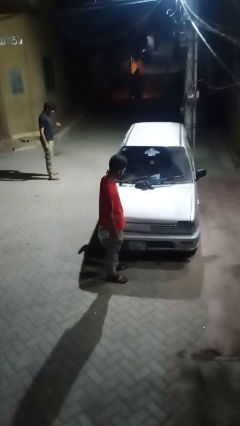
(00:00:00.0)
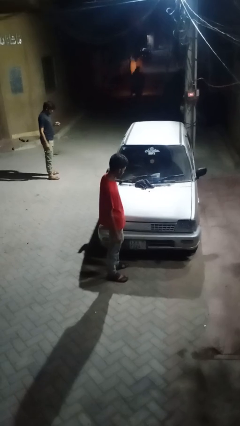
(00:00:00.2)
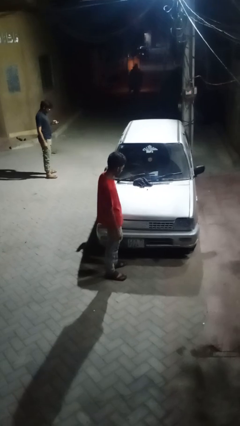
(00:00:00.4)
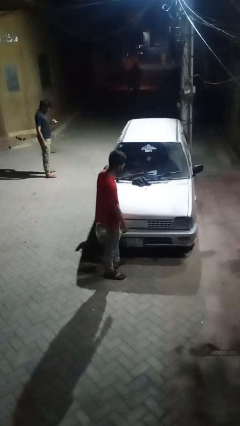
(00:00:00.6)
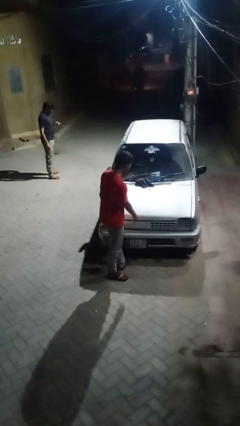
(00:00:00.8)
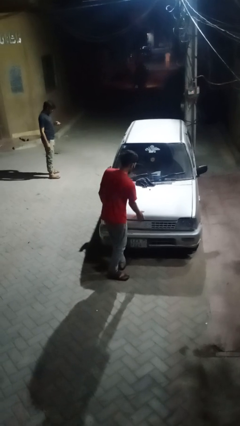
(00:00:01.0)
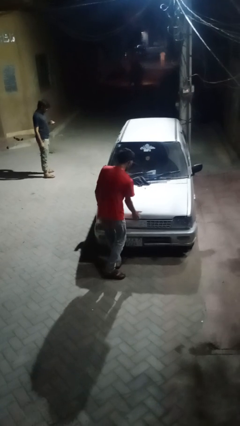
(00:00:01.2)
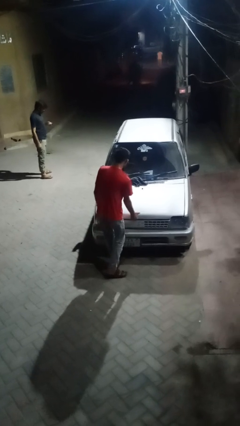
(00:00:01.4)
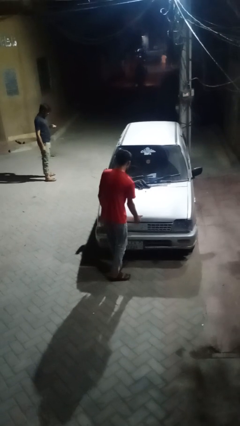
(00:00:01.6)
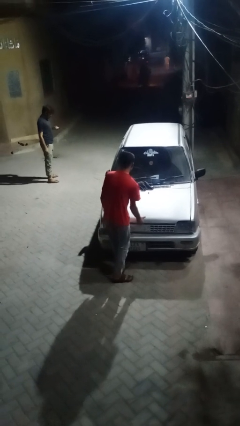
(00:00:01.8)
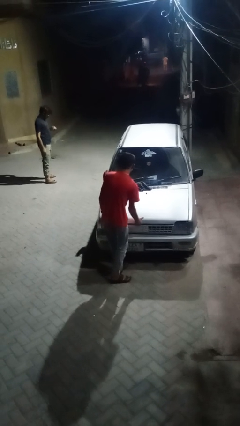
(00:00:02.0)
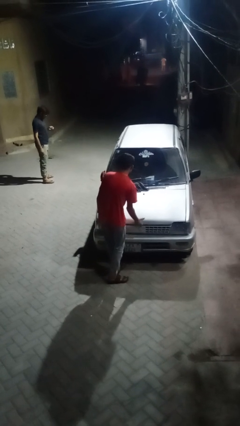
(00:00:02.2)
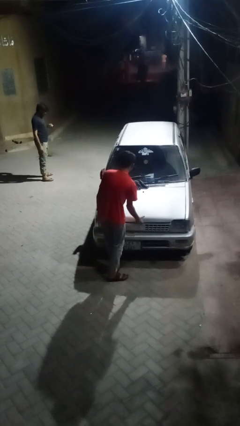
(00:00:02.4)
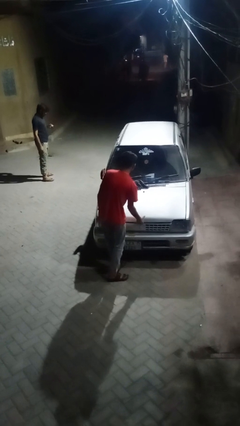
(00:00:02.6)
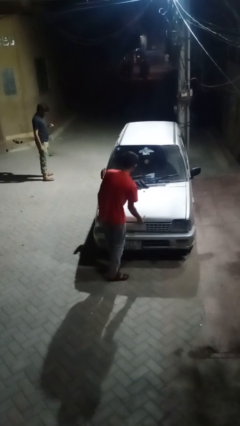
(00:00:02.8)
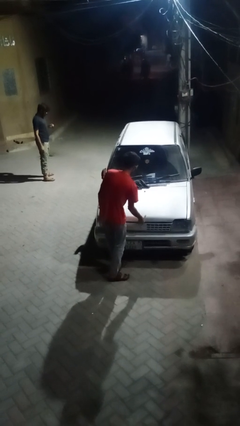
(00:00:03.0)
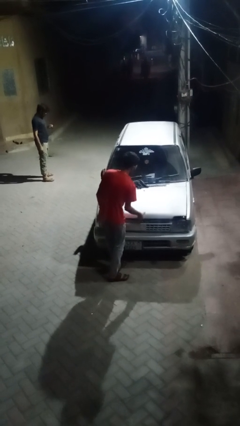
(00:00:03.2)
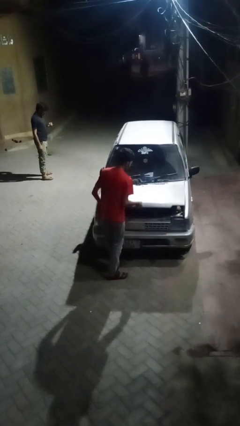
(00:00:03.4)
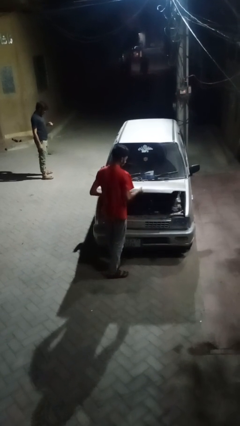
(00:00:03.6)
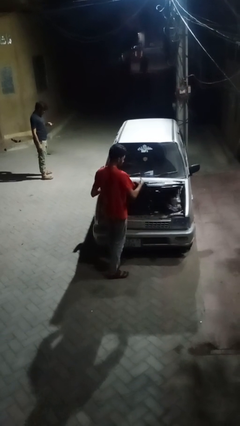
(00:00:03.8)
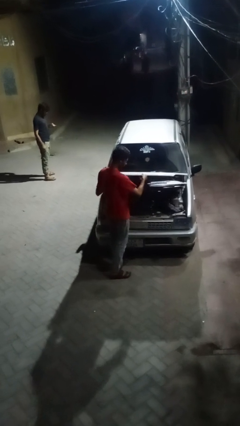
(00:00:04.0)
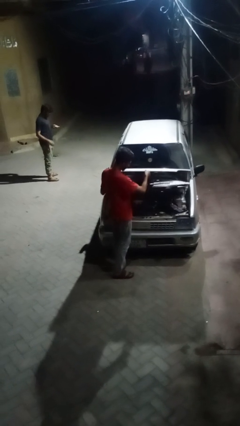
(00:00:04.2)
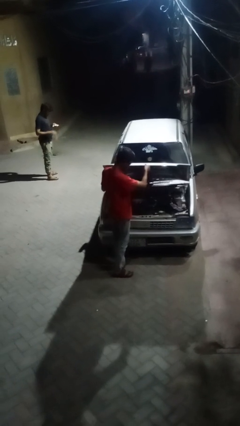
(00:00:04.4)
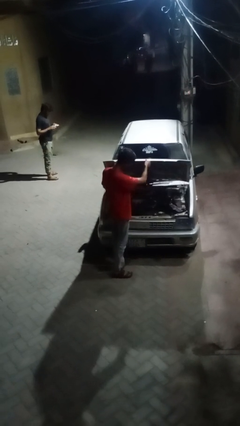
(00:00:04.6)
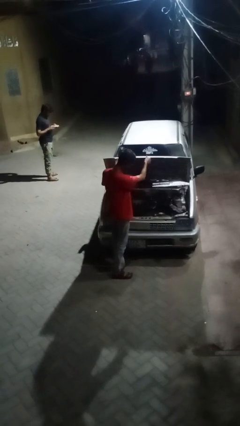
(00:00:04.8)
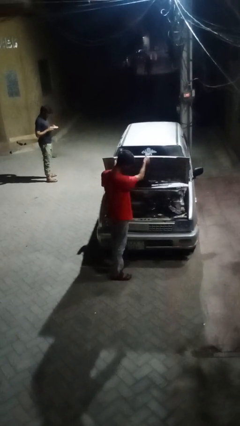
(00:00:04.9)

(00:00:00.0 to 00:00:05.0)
person opens car hood

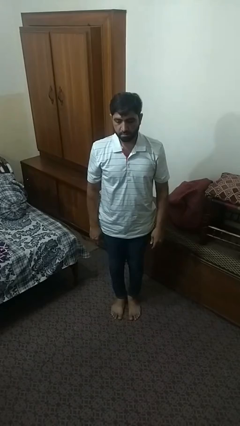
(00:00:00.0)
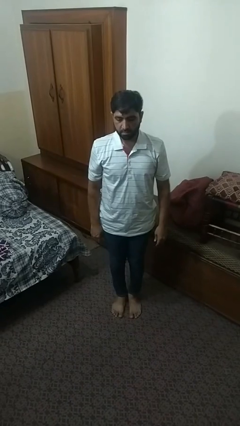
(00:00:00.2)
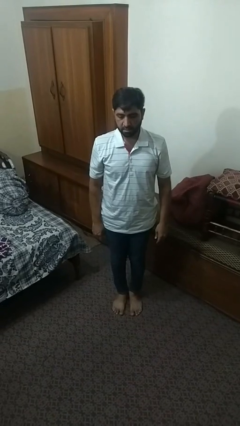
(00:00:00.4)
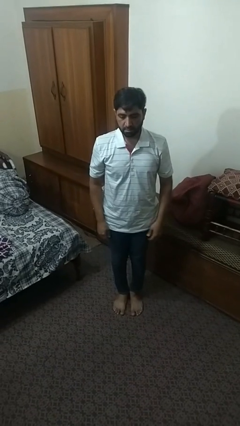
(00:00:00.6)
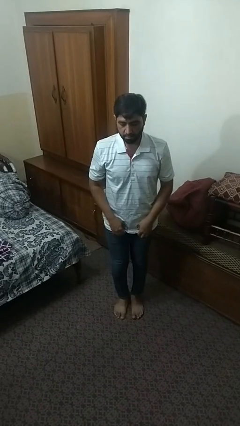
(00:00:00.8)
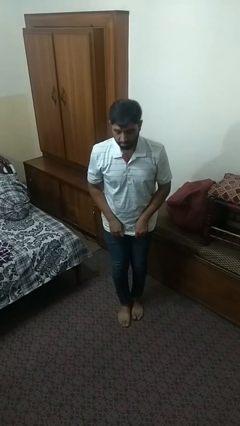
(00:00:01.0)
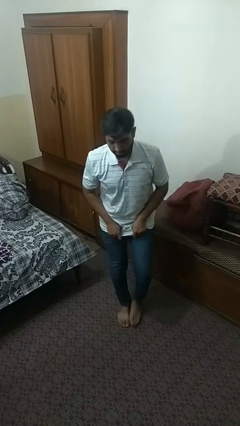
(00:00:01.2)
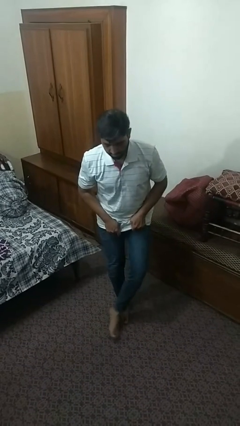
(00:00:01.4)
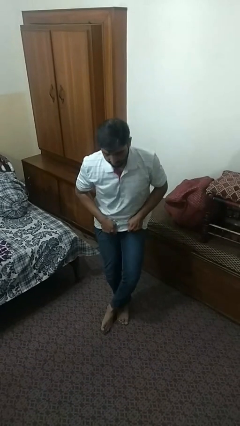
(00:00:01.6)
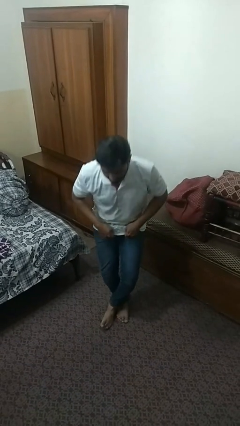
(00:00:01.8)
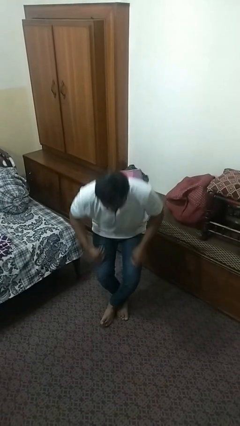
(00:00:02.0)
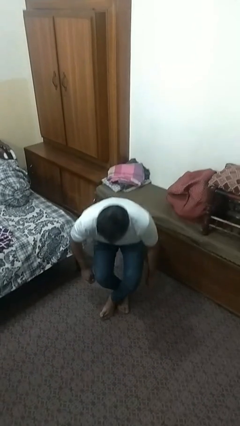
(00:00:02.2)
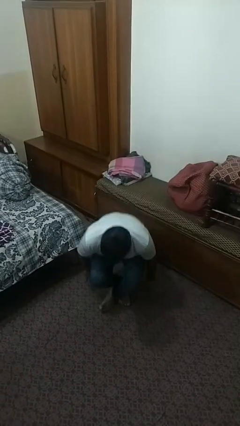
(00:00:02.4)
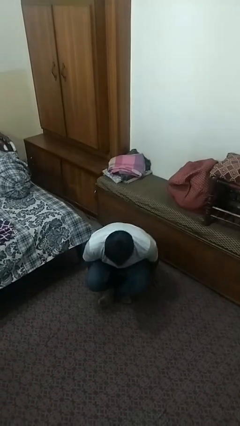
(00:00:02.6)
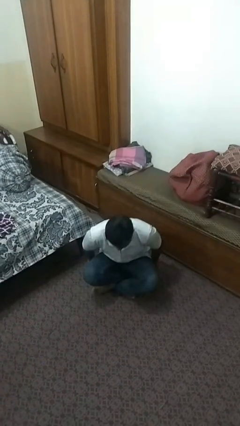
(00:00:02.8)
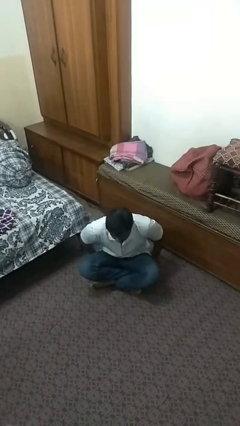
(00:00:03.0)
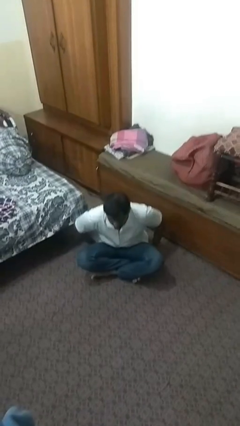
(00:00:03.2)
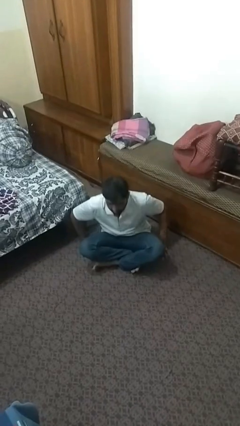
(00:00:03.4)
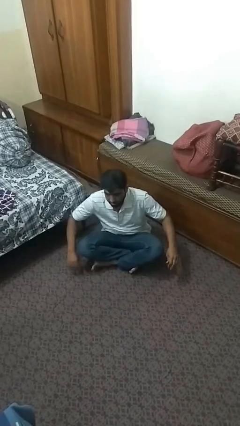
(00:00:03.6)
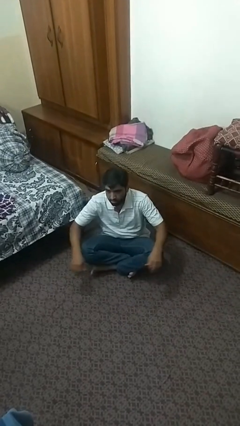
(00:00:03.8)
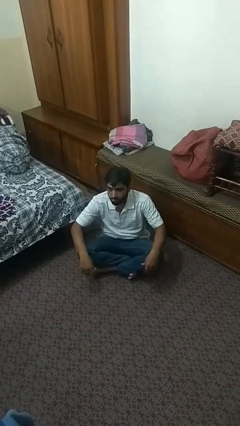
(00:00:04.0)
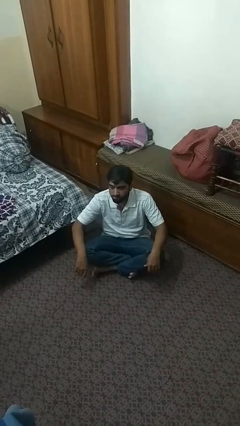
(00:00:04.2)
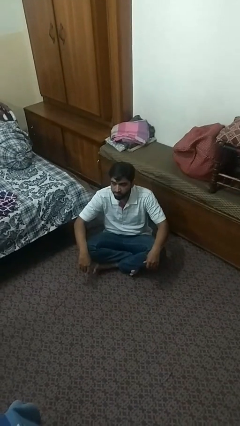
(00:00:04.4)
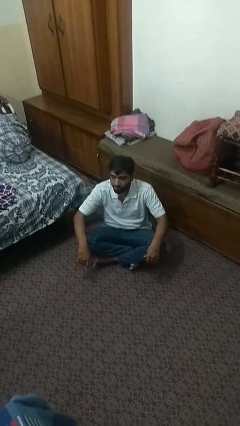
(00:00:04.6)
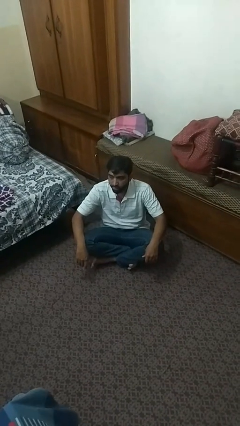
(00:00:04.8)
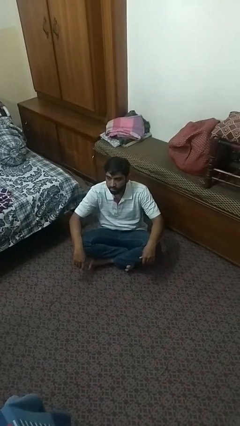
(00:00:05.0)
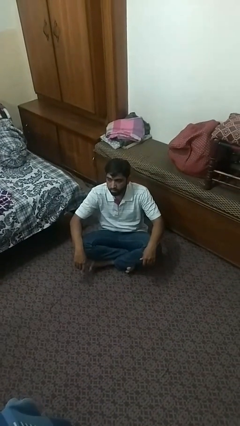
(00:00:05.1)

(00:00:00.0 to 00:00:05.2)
person sits crisscross

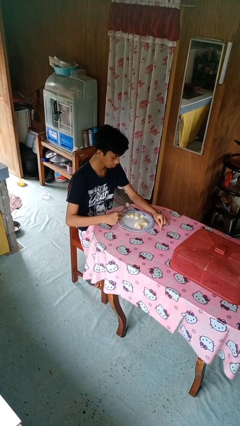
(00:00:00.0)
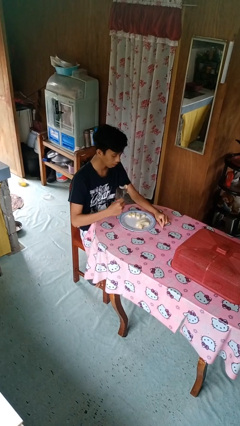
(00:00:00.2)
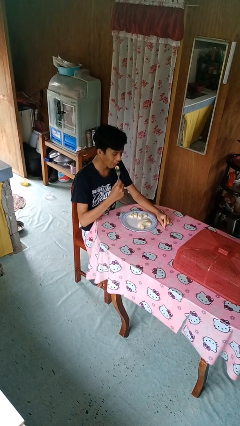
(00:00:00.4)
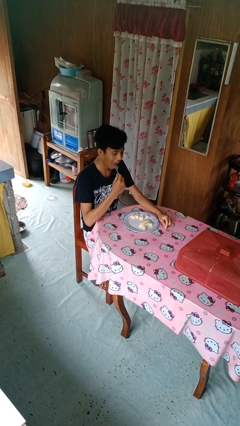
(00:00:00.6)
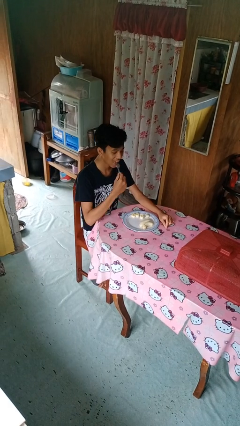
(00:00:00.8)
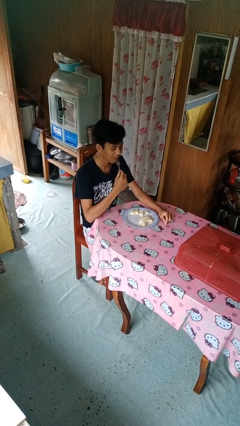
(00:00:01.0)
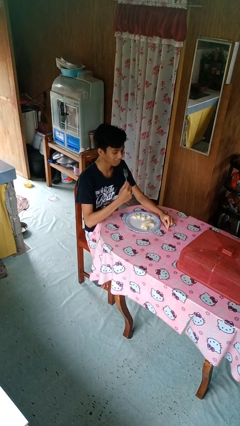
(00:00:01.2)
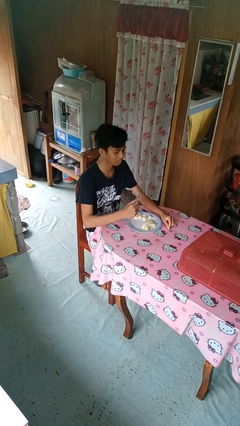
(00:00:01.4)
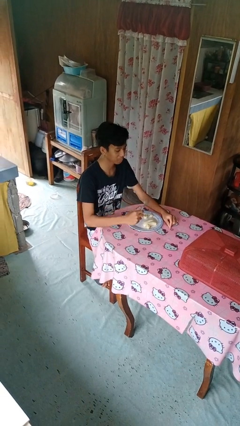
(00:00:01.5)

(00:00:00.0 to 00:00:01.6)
person eats with utensil

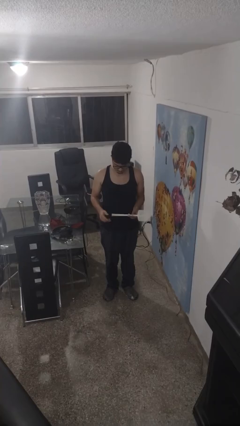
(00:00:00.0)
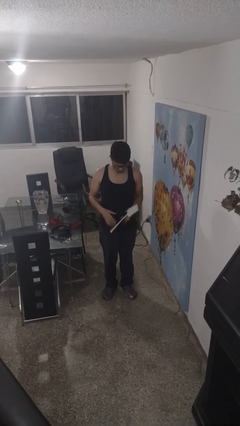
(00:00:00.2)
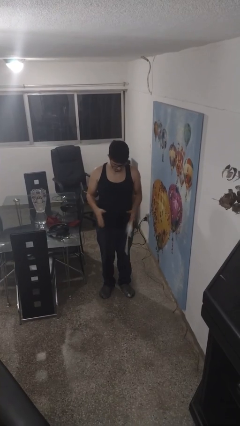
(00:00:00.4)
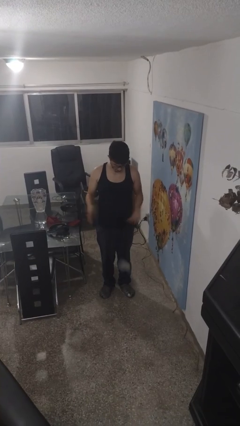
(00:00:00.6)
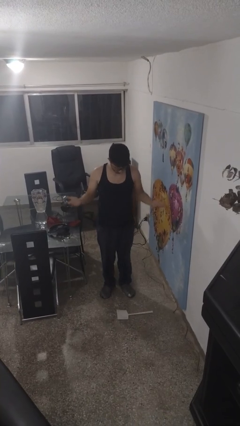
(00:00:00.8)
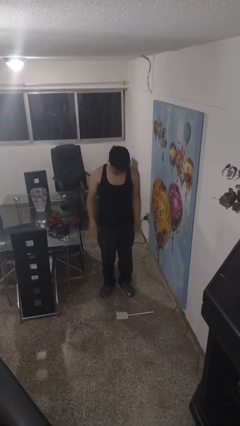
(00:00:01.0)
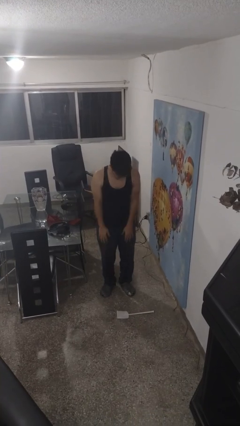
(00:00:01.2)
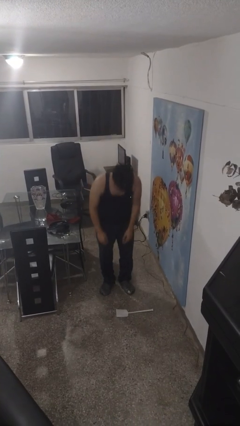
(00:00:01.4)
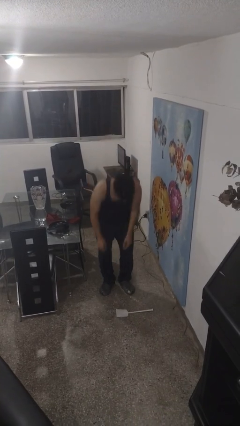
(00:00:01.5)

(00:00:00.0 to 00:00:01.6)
person drops object

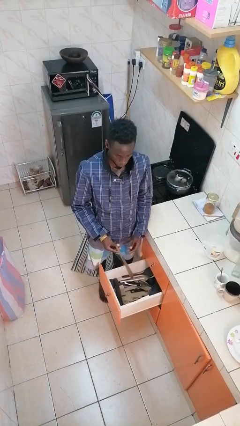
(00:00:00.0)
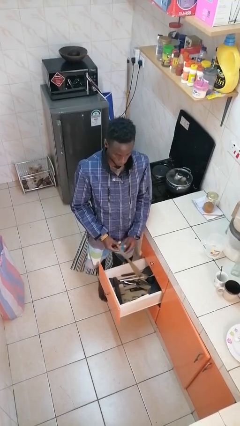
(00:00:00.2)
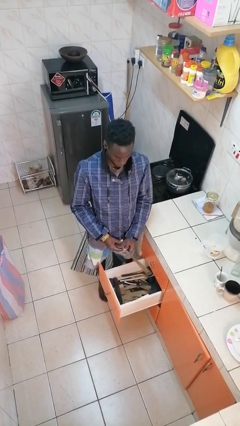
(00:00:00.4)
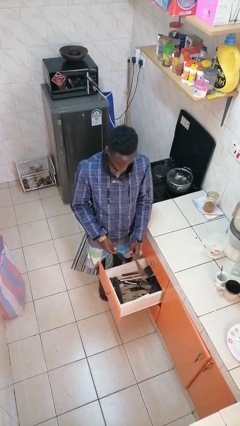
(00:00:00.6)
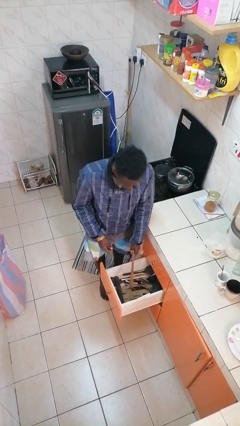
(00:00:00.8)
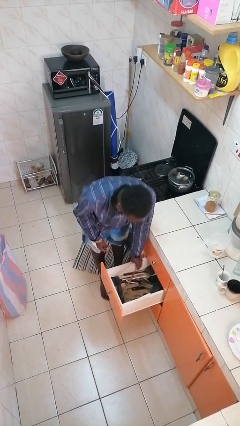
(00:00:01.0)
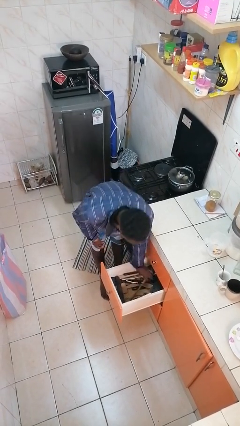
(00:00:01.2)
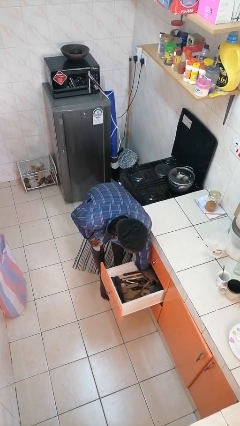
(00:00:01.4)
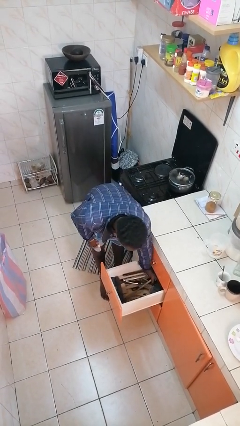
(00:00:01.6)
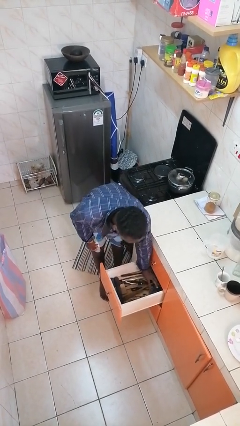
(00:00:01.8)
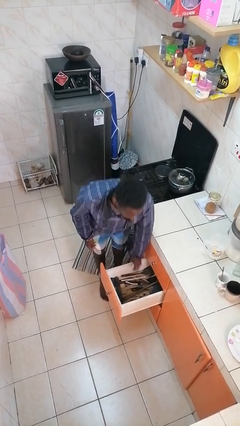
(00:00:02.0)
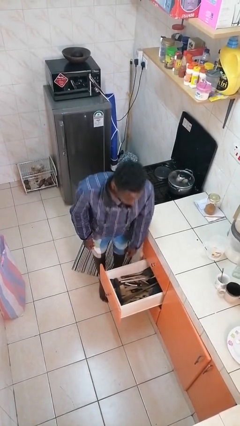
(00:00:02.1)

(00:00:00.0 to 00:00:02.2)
person puts object into kitchen drawer

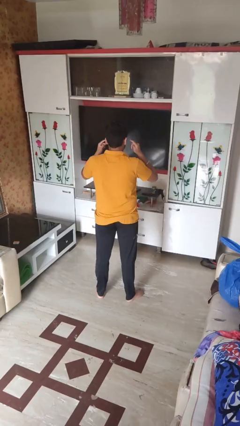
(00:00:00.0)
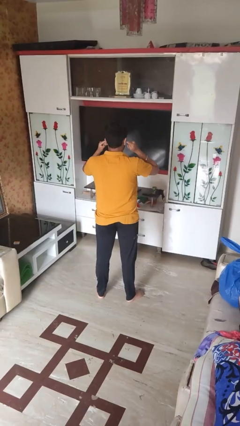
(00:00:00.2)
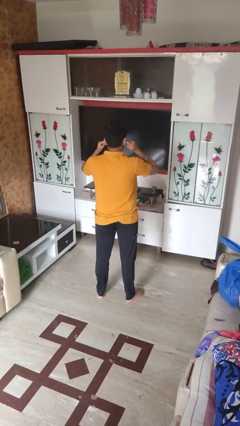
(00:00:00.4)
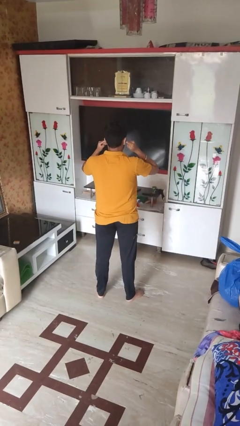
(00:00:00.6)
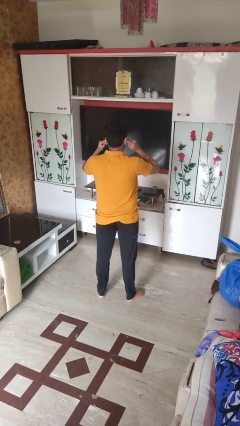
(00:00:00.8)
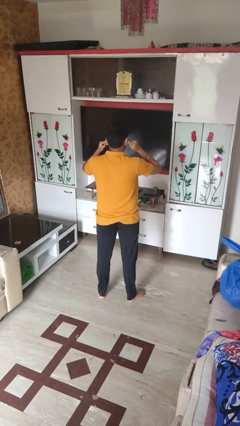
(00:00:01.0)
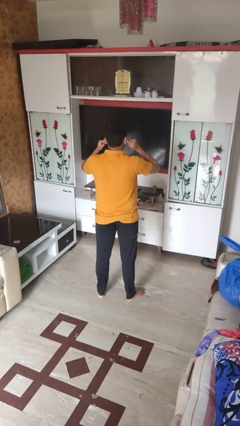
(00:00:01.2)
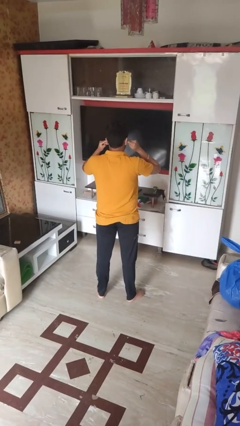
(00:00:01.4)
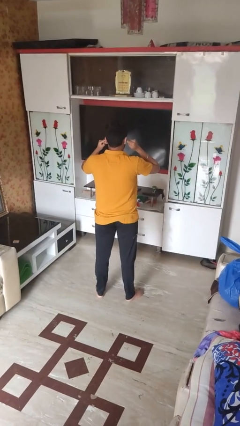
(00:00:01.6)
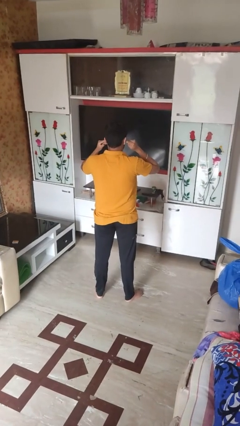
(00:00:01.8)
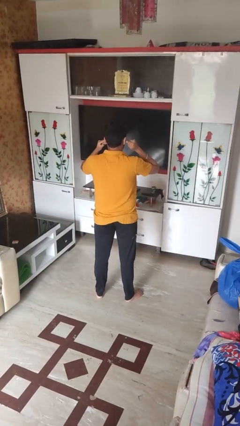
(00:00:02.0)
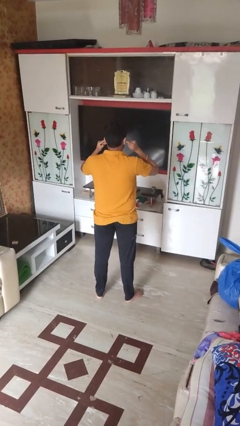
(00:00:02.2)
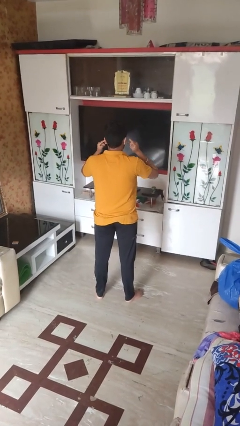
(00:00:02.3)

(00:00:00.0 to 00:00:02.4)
person puts fingers in ear
